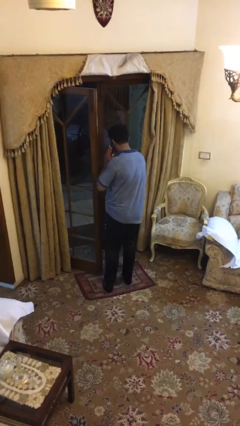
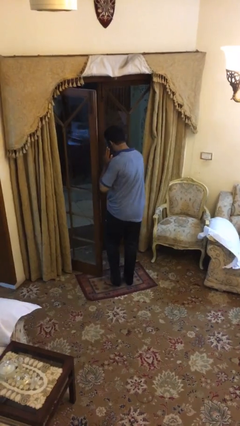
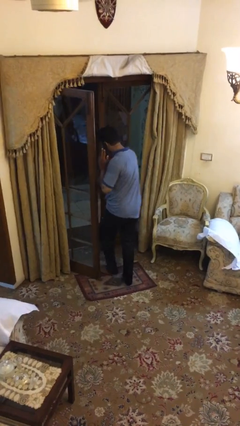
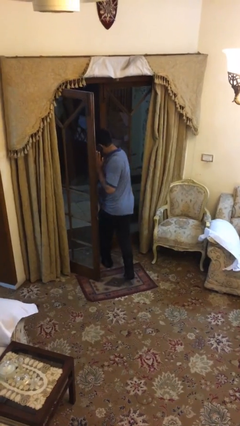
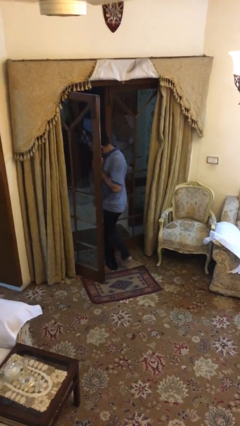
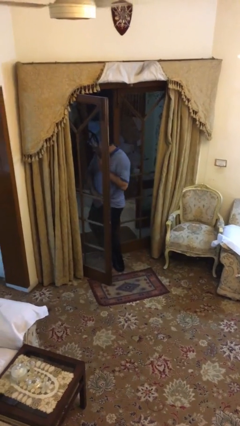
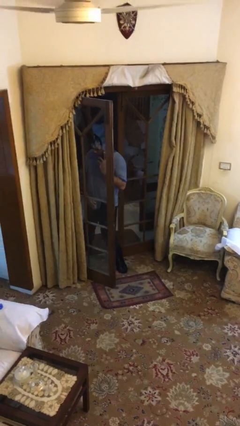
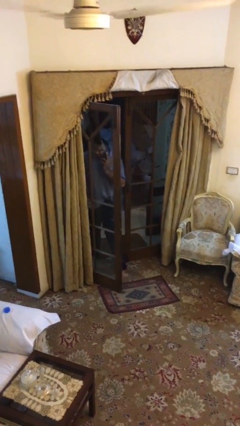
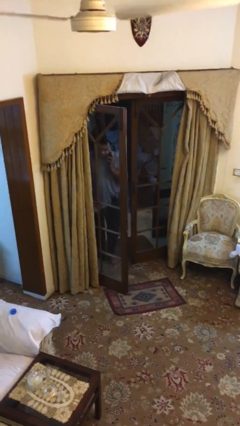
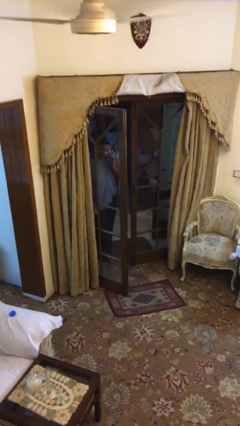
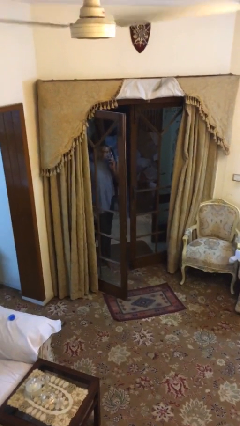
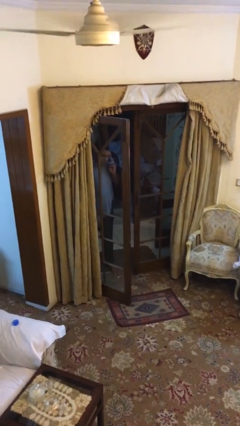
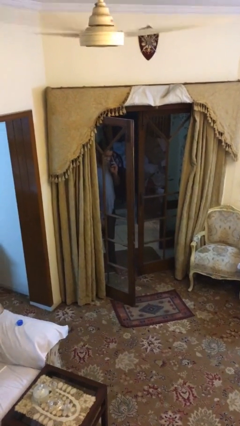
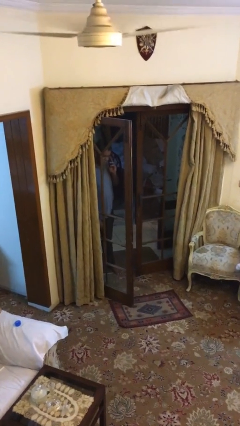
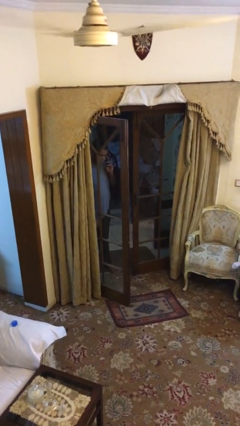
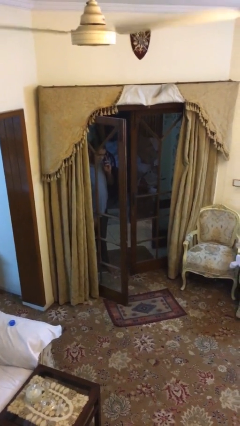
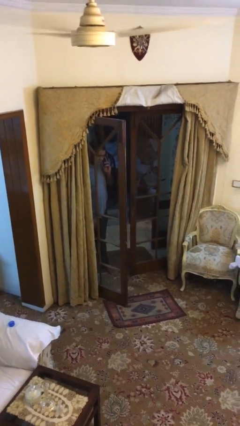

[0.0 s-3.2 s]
person exits scene through structure

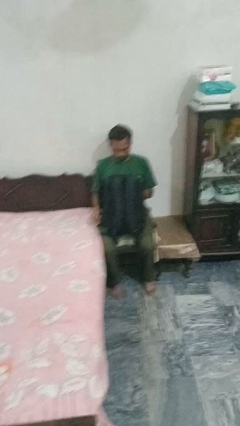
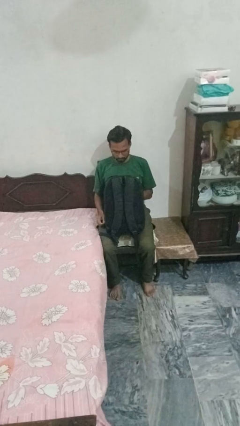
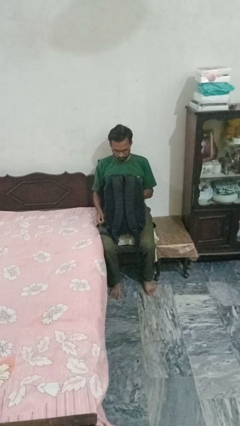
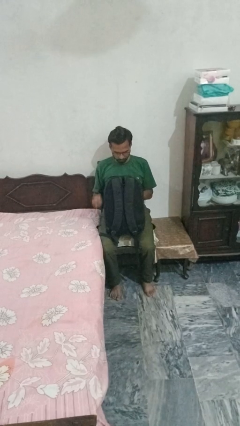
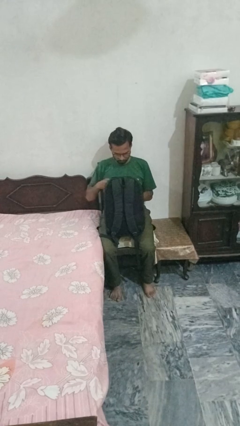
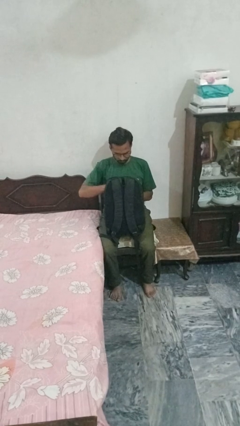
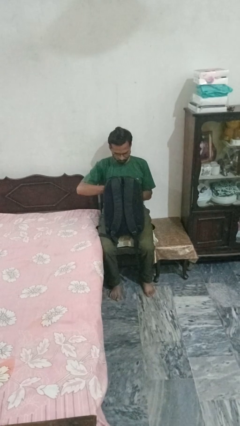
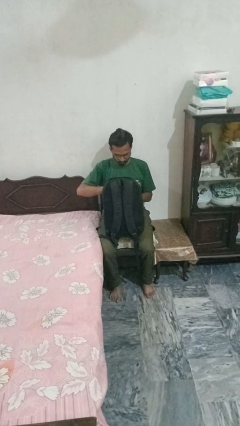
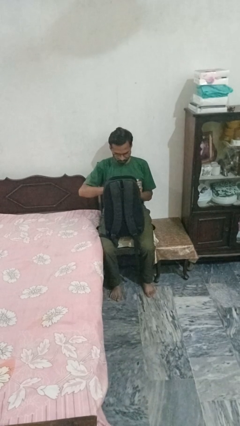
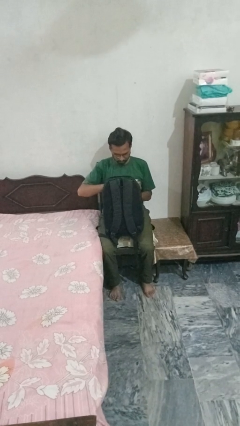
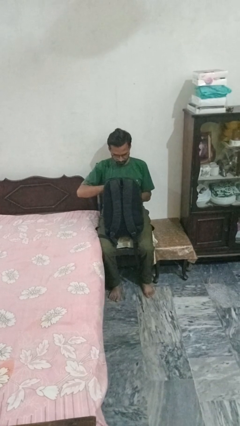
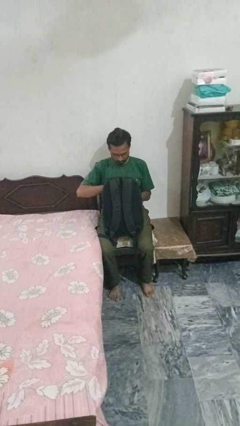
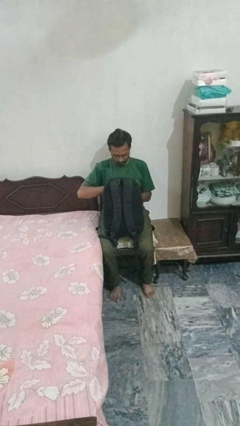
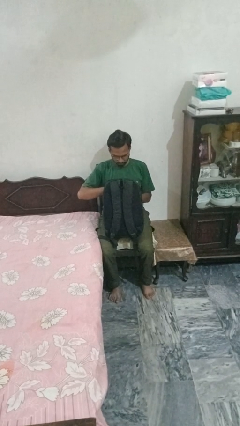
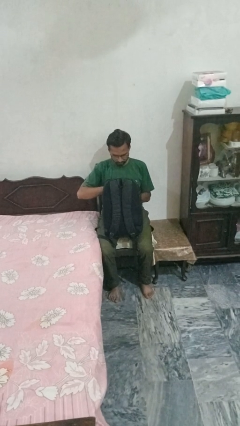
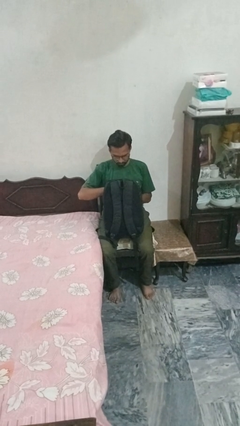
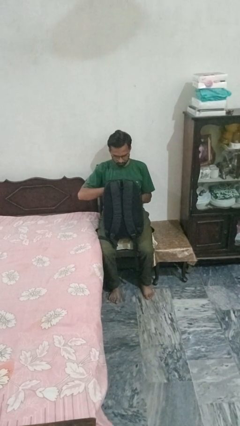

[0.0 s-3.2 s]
person searches in backpack

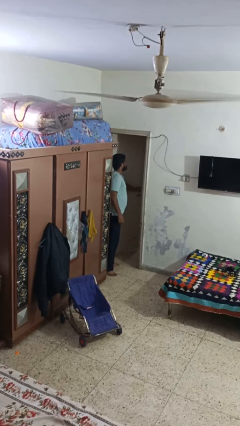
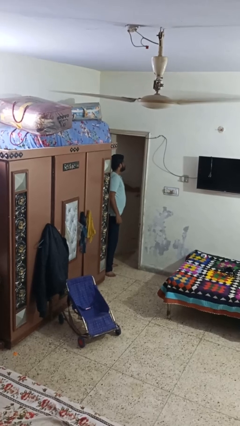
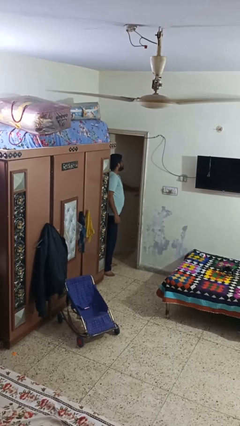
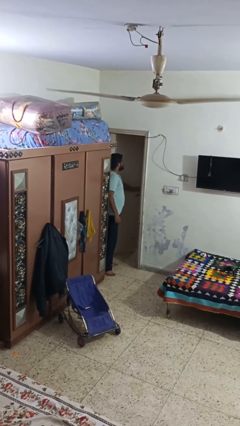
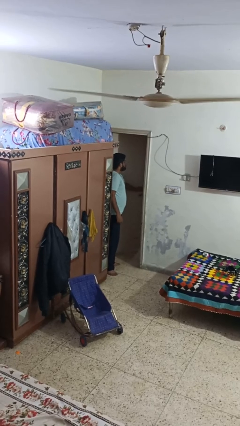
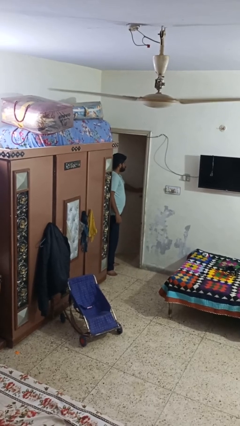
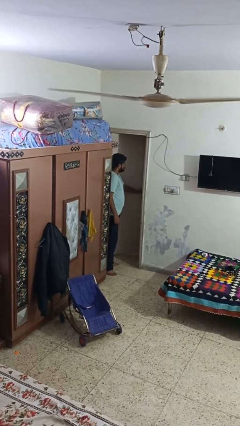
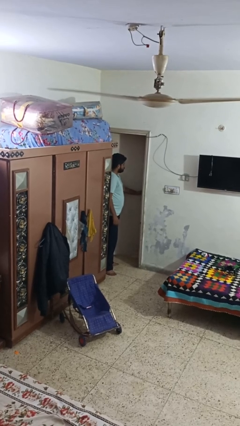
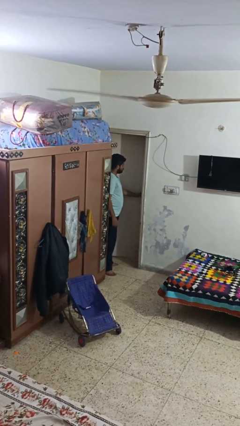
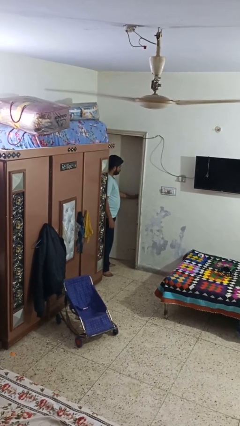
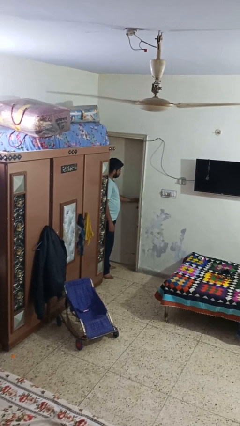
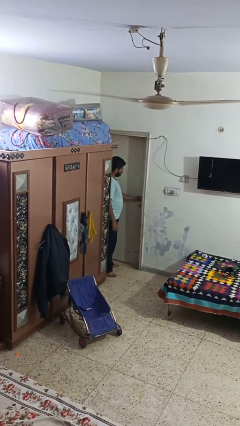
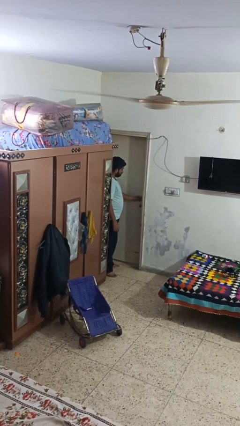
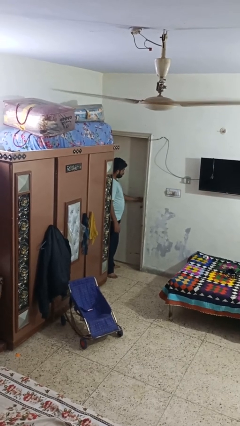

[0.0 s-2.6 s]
person closes facility door

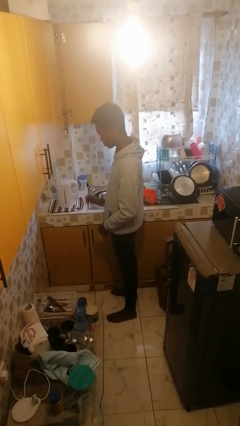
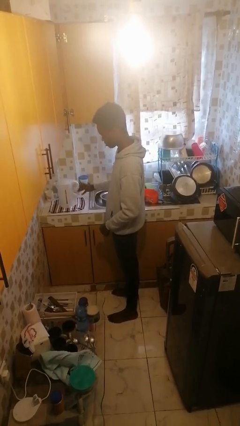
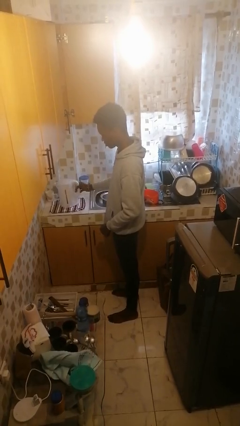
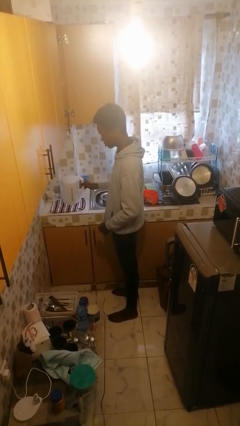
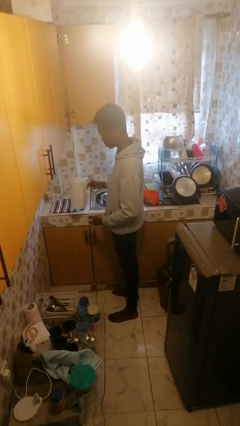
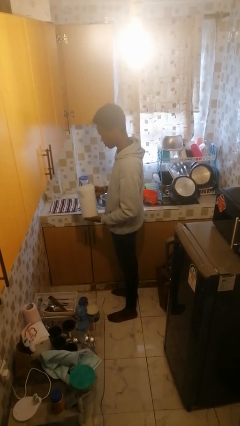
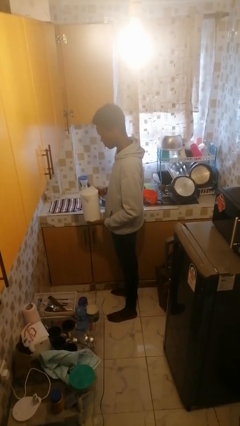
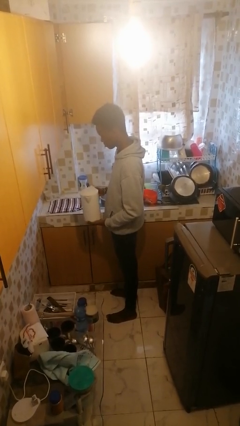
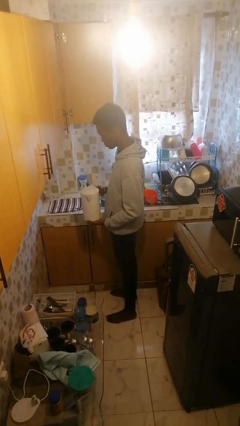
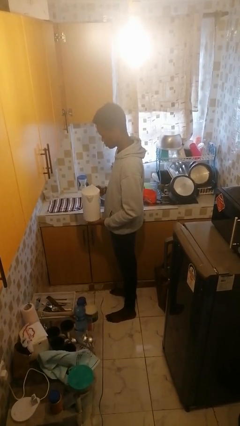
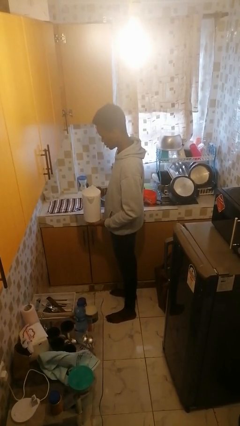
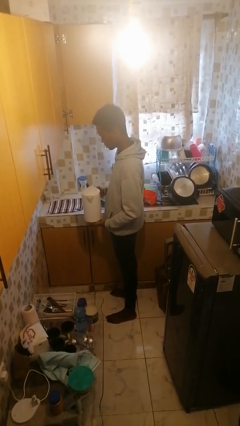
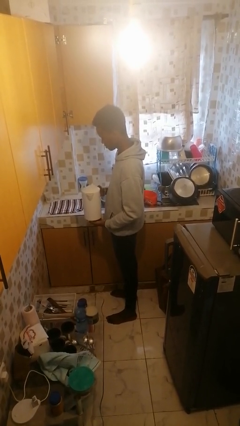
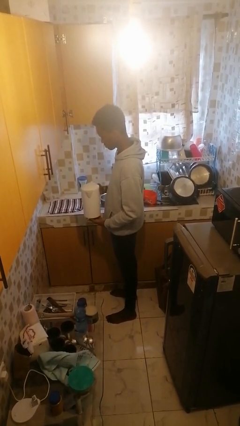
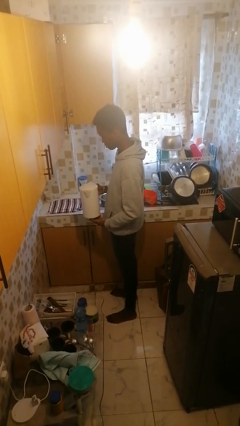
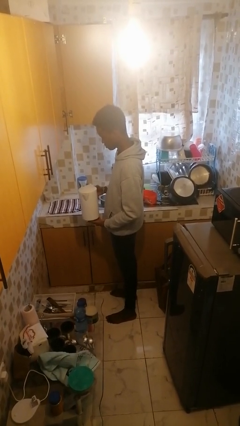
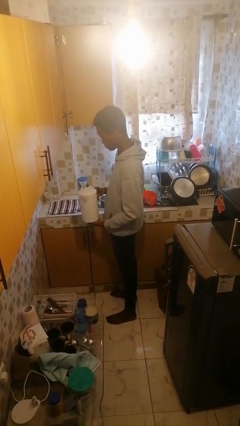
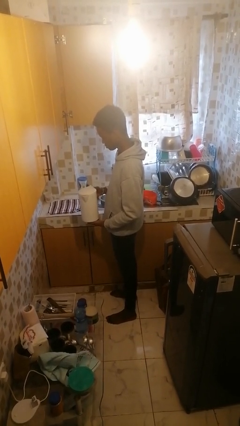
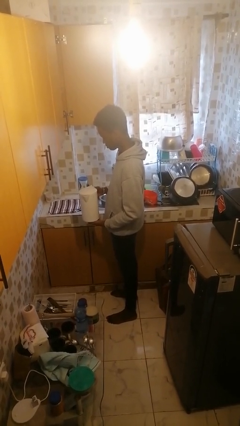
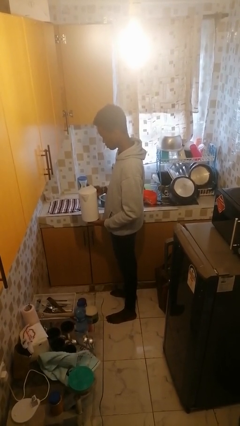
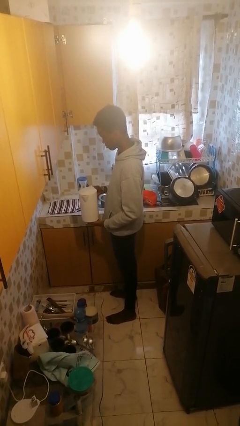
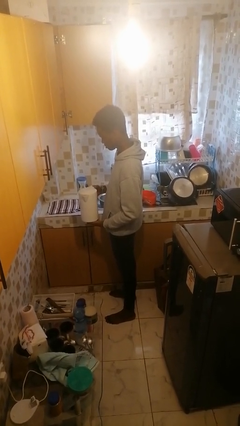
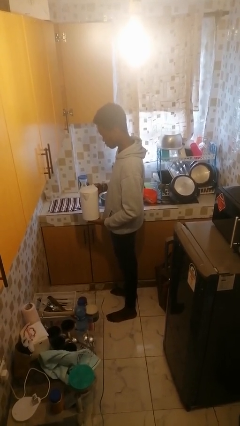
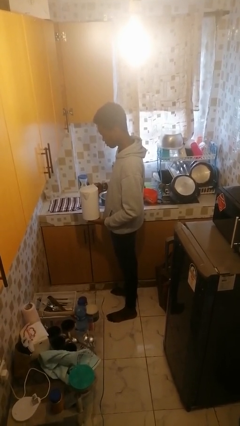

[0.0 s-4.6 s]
person picks up object from countertop

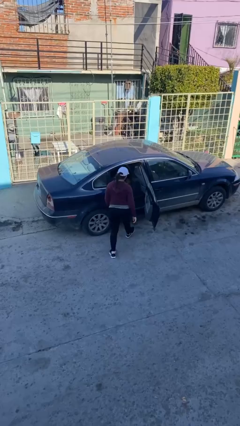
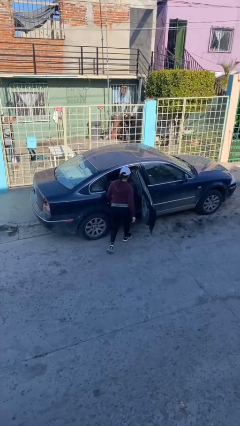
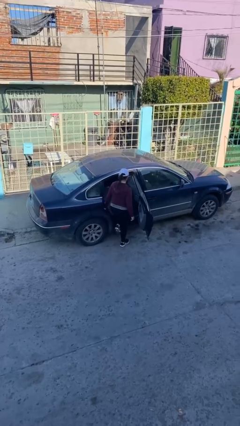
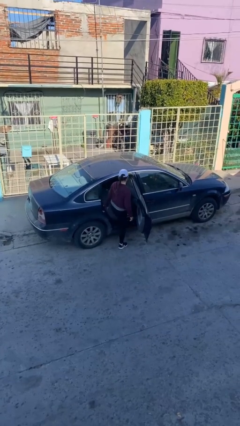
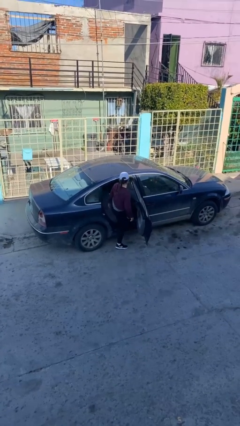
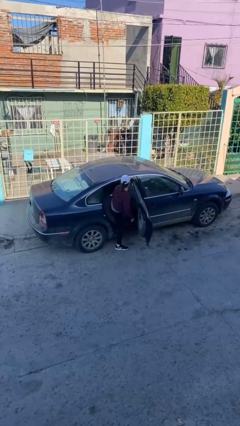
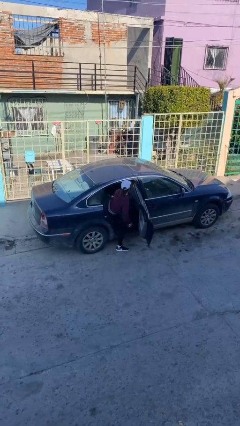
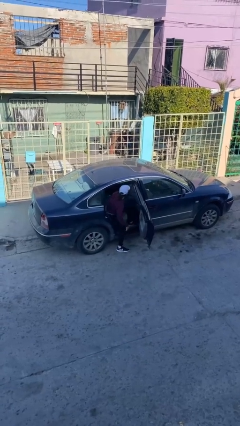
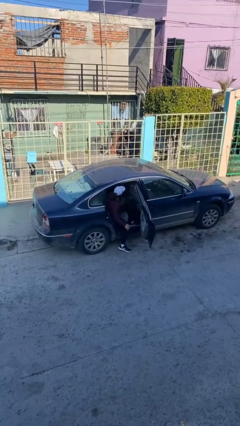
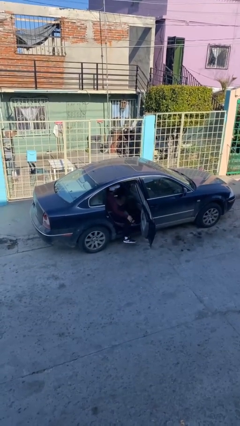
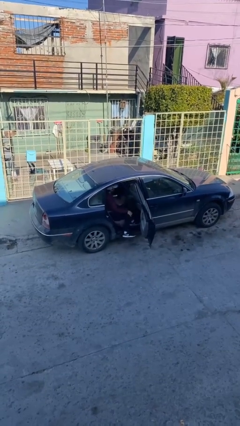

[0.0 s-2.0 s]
person enters car

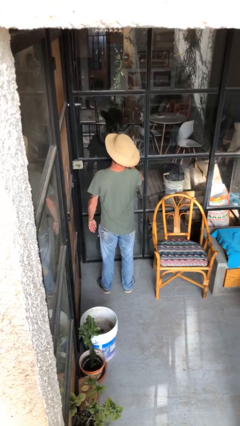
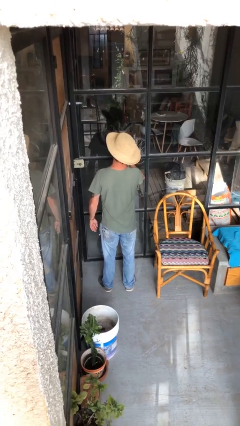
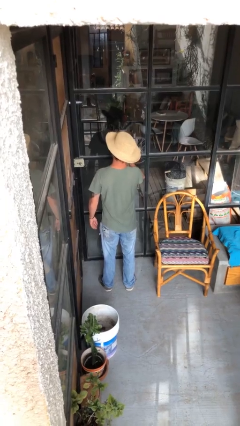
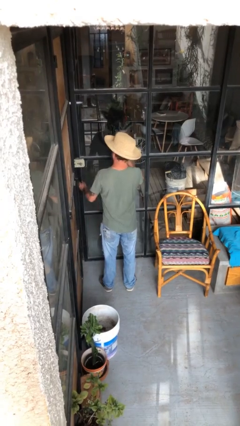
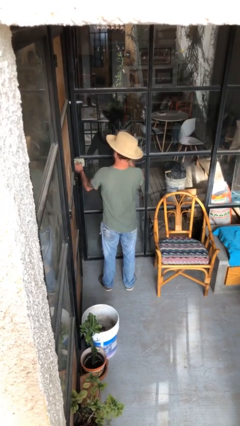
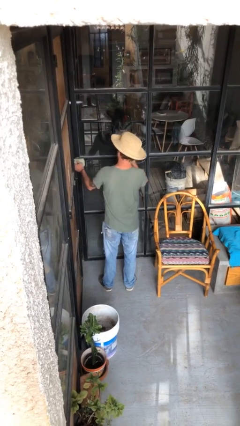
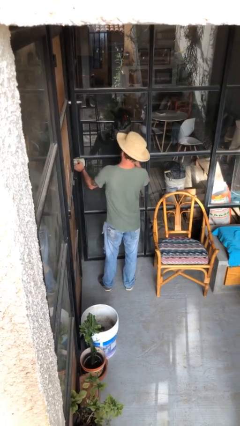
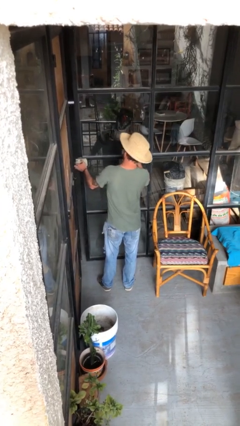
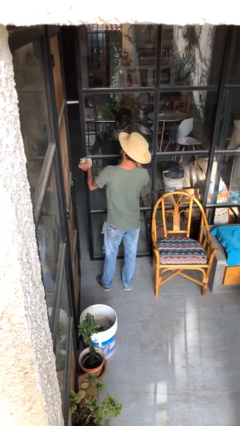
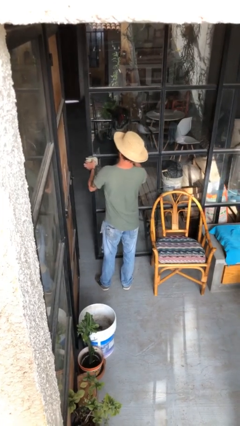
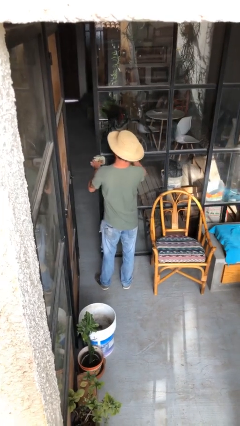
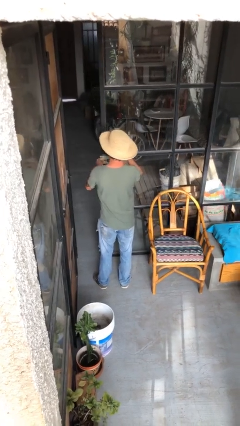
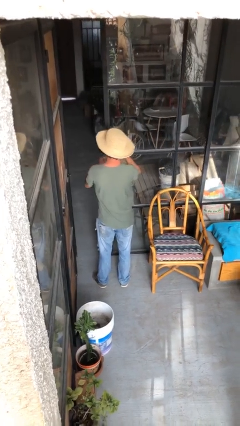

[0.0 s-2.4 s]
person opens facility door
